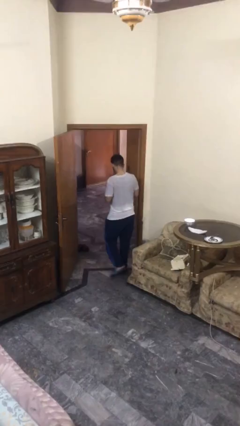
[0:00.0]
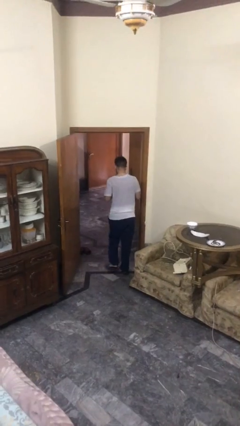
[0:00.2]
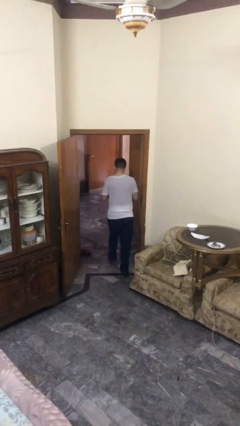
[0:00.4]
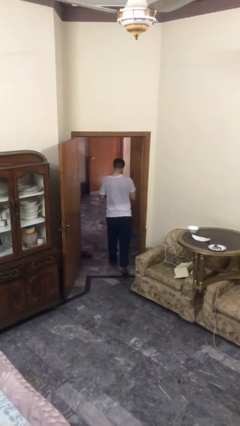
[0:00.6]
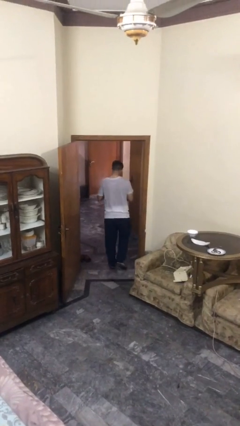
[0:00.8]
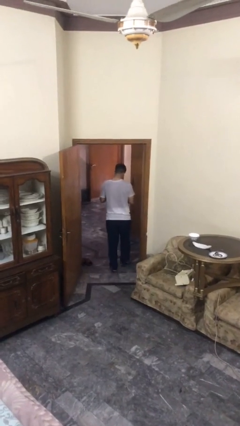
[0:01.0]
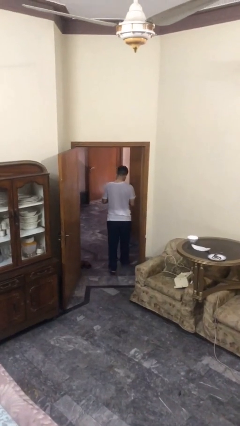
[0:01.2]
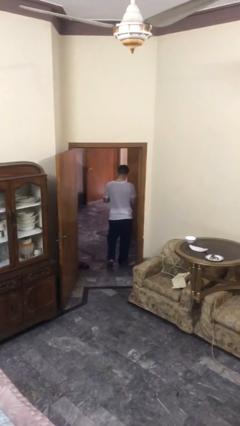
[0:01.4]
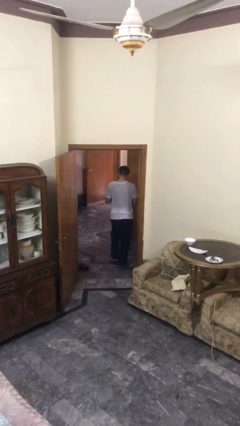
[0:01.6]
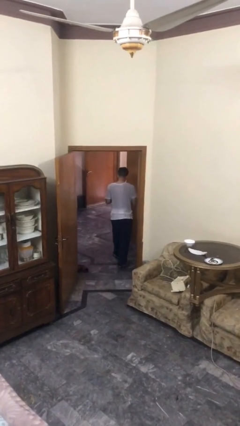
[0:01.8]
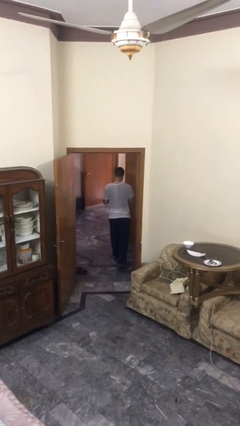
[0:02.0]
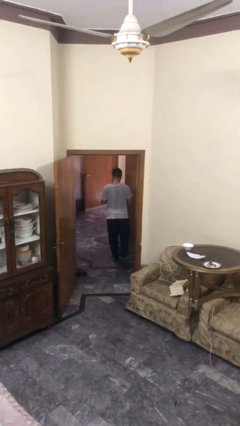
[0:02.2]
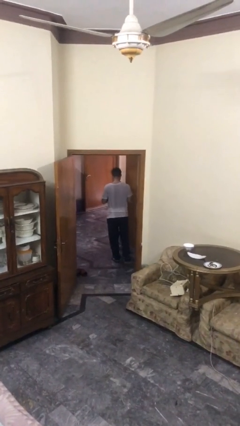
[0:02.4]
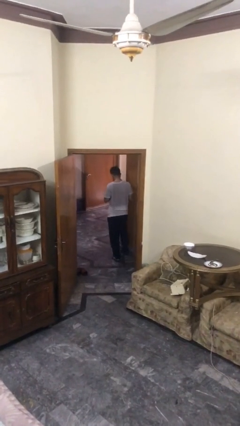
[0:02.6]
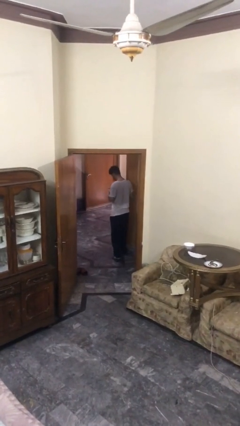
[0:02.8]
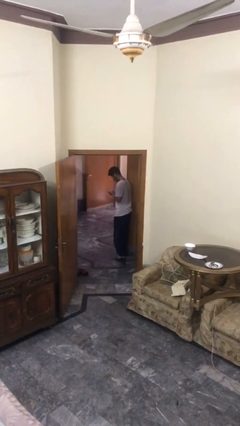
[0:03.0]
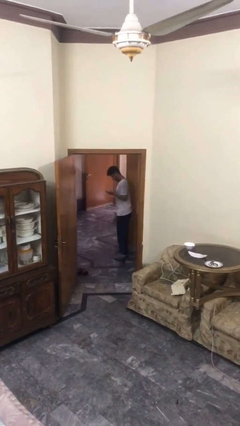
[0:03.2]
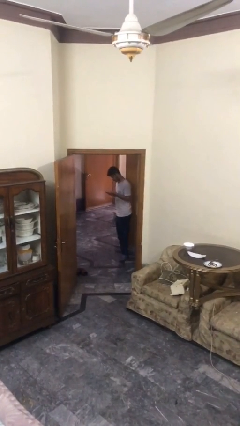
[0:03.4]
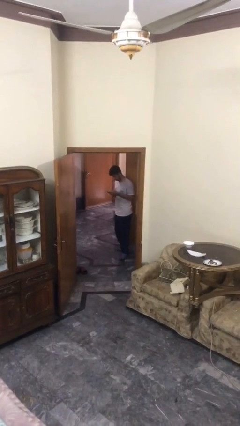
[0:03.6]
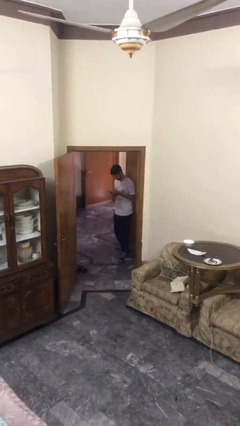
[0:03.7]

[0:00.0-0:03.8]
person exits scene through structure

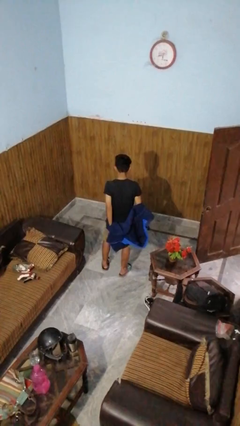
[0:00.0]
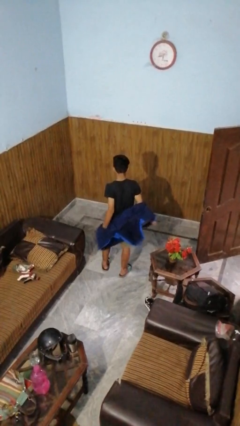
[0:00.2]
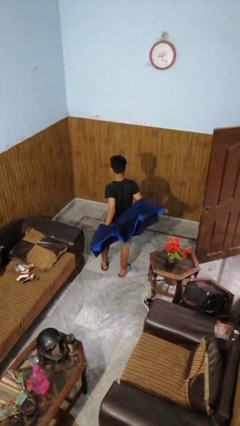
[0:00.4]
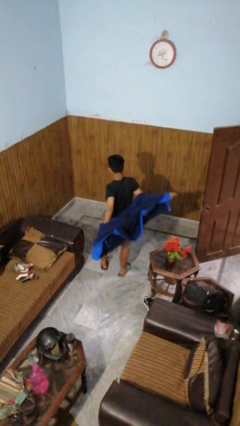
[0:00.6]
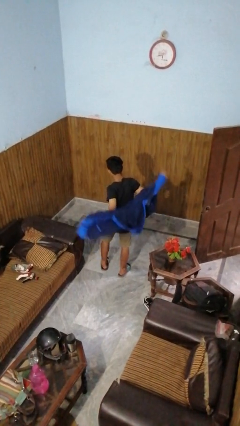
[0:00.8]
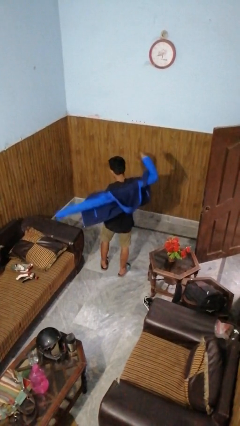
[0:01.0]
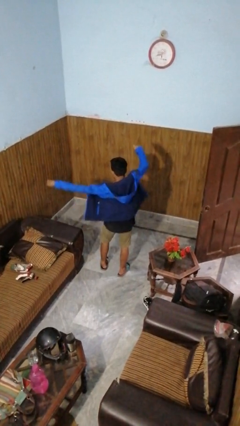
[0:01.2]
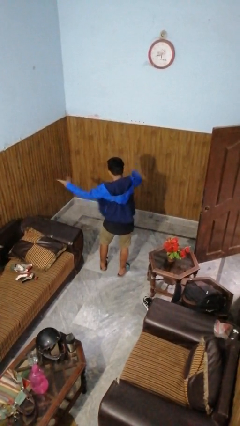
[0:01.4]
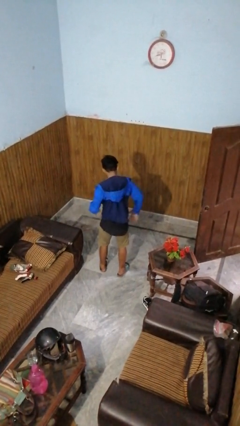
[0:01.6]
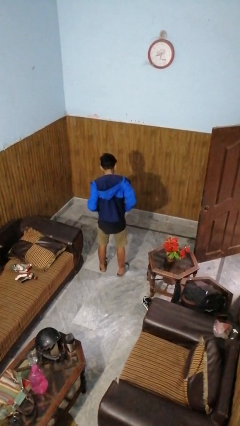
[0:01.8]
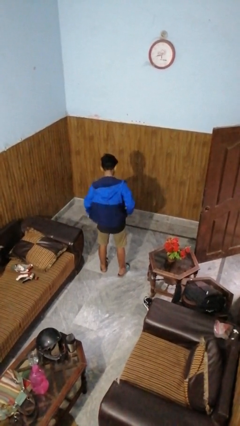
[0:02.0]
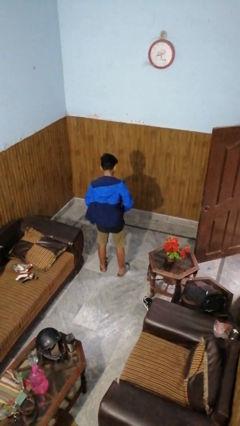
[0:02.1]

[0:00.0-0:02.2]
person puts on jacket

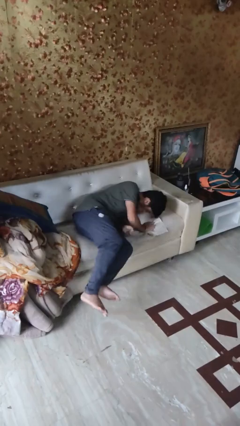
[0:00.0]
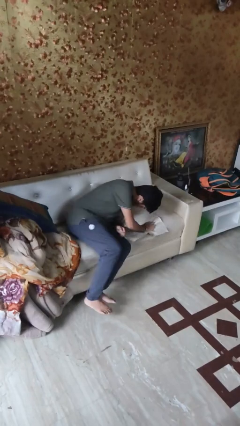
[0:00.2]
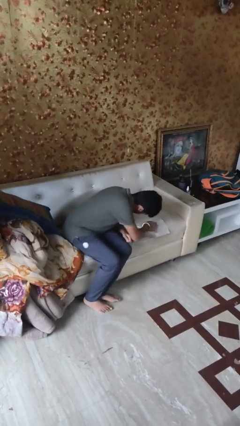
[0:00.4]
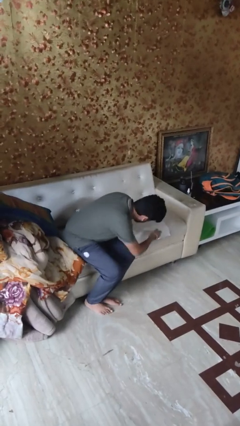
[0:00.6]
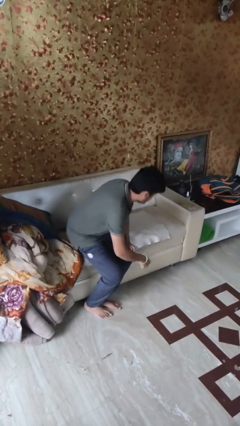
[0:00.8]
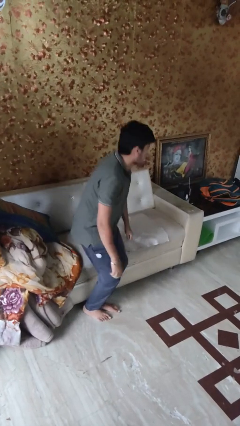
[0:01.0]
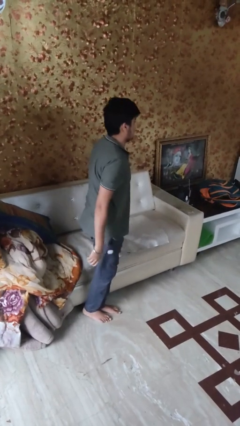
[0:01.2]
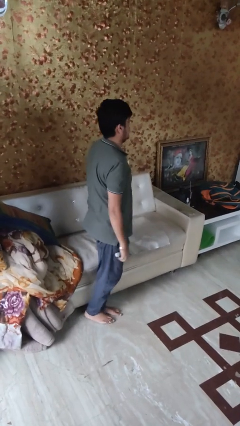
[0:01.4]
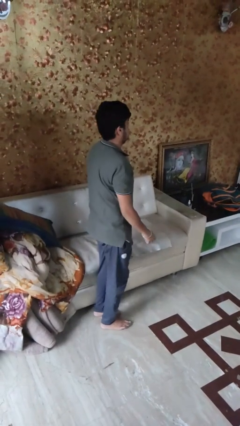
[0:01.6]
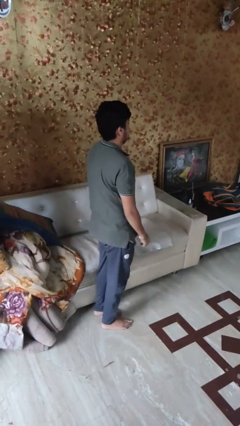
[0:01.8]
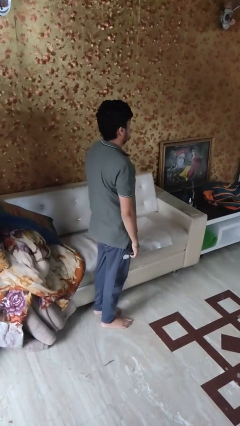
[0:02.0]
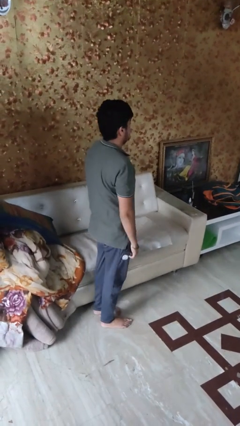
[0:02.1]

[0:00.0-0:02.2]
person stands up

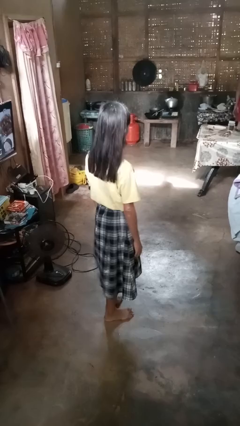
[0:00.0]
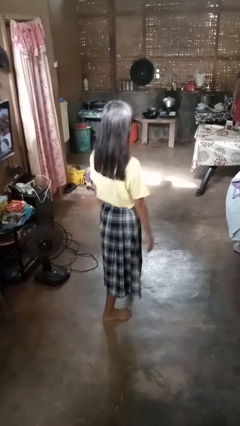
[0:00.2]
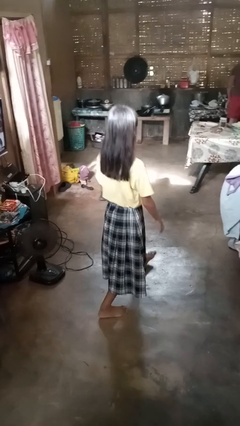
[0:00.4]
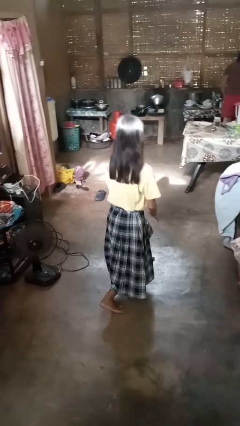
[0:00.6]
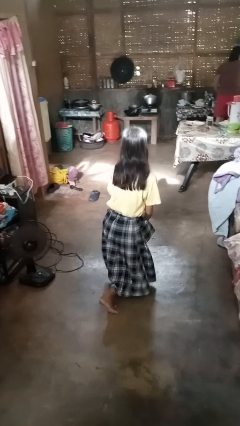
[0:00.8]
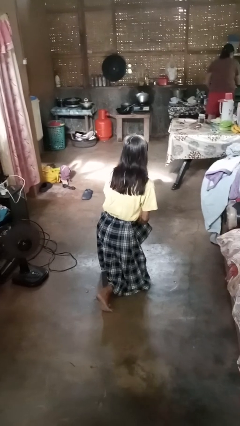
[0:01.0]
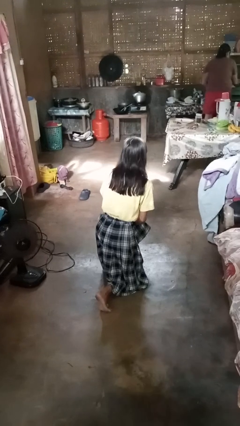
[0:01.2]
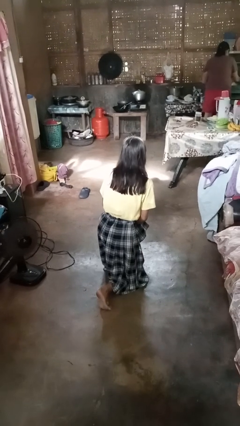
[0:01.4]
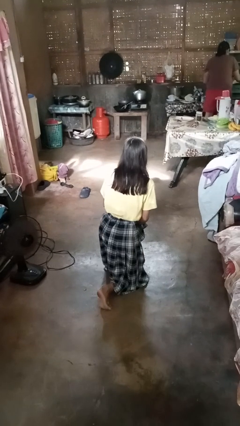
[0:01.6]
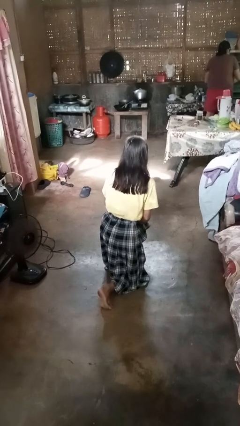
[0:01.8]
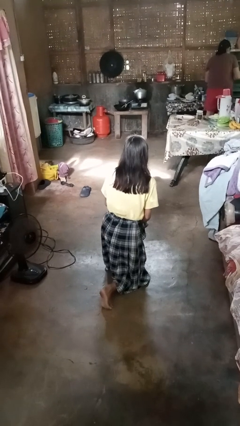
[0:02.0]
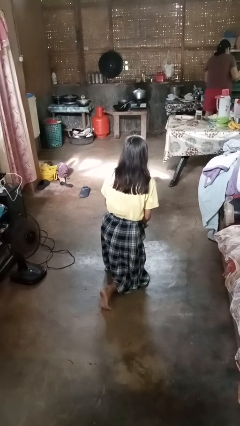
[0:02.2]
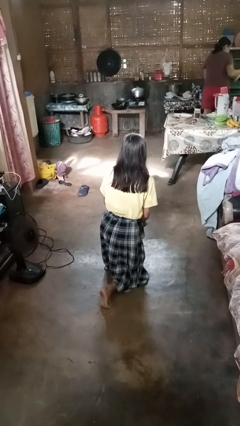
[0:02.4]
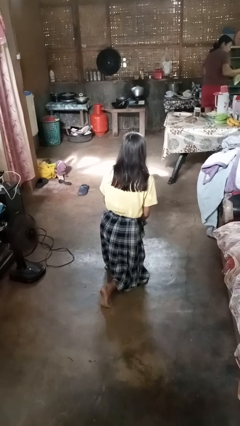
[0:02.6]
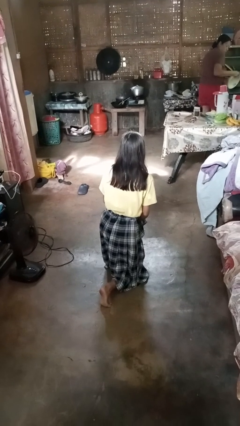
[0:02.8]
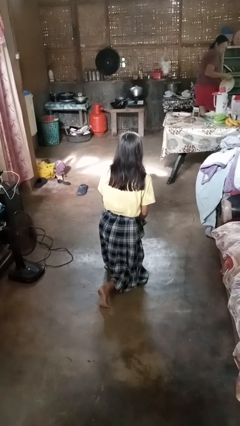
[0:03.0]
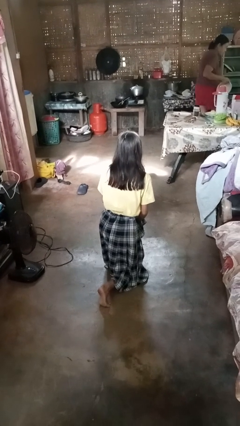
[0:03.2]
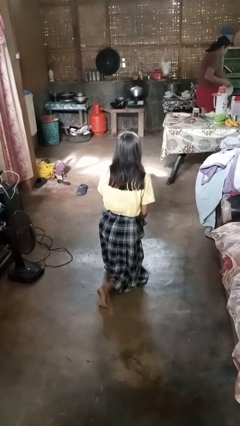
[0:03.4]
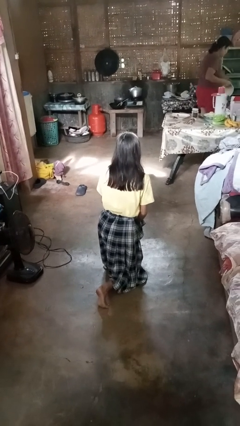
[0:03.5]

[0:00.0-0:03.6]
person exercises with lunges

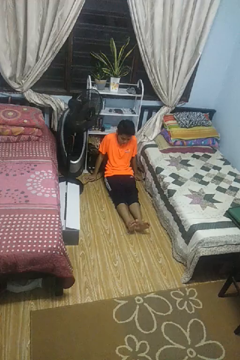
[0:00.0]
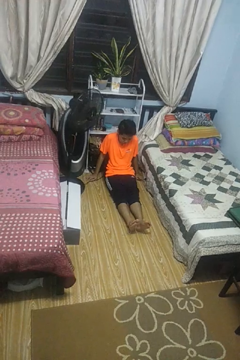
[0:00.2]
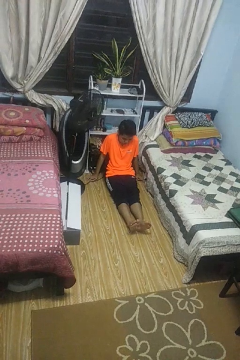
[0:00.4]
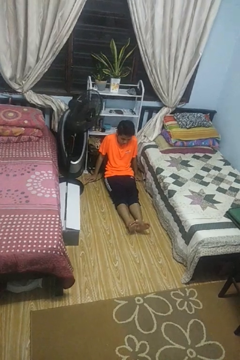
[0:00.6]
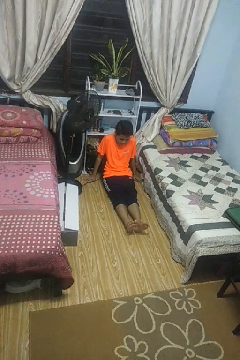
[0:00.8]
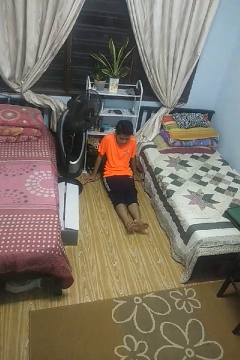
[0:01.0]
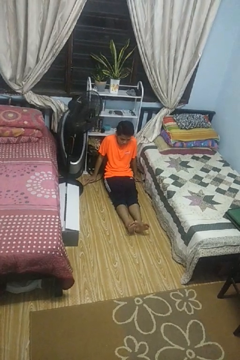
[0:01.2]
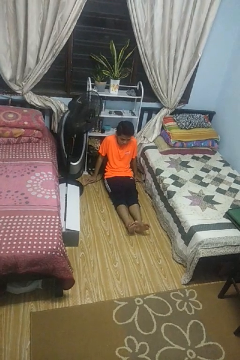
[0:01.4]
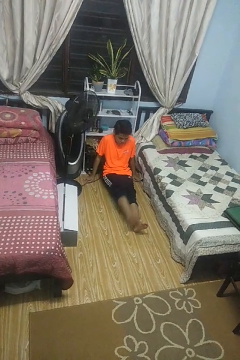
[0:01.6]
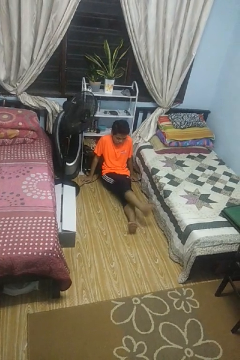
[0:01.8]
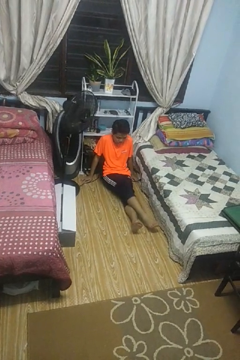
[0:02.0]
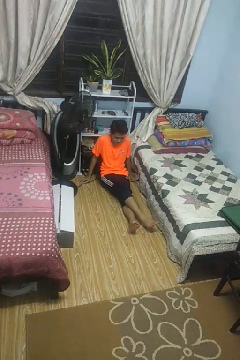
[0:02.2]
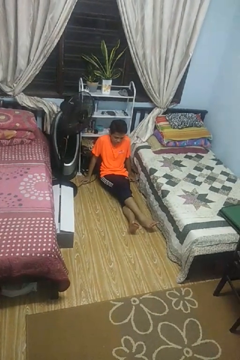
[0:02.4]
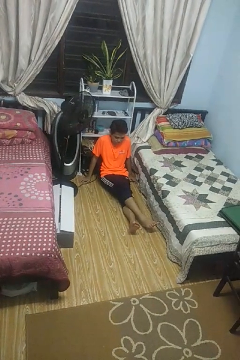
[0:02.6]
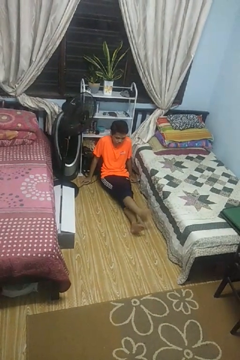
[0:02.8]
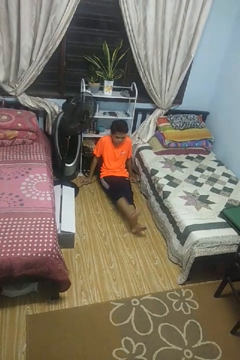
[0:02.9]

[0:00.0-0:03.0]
person crosses legs

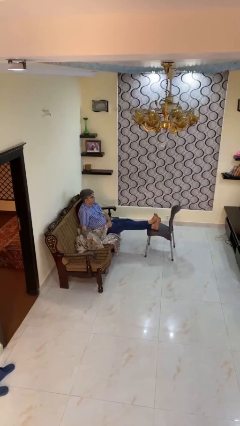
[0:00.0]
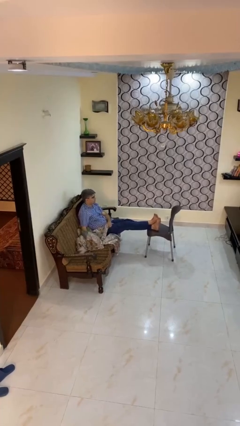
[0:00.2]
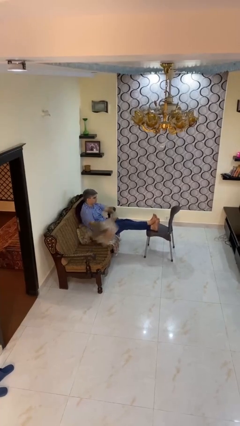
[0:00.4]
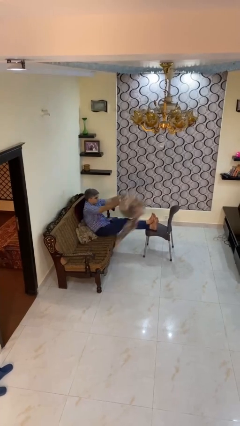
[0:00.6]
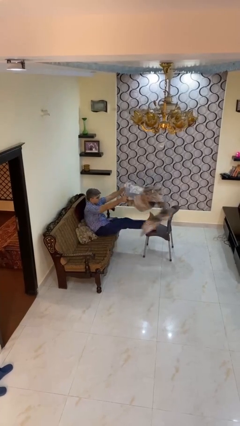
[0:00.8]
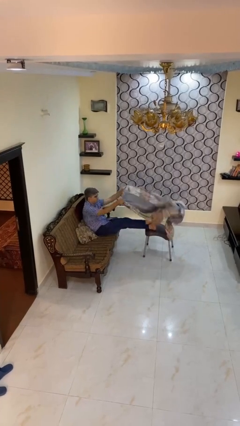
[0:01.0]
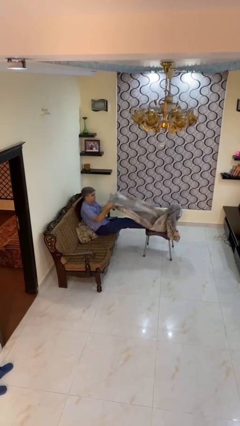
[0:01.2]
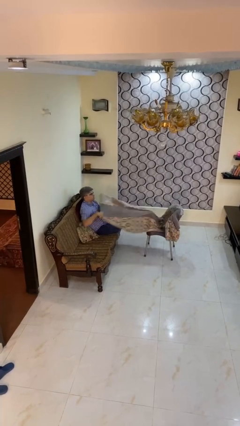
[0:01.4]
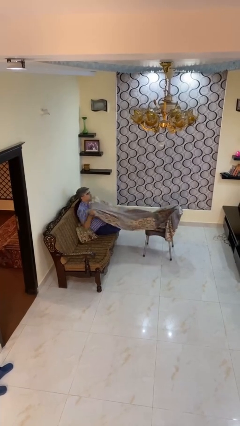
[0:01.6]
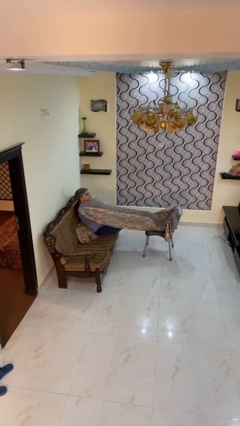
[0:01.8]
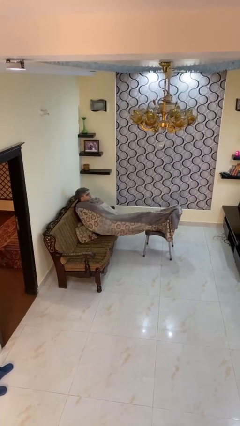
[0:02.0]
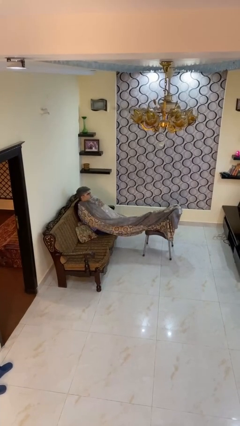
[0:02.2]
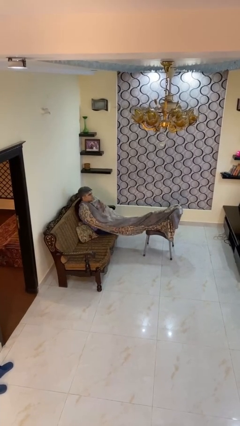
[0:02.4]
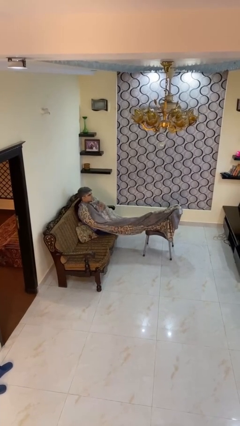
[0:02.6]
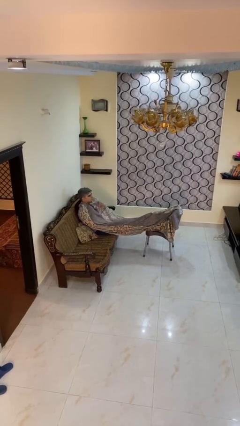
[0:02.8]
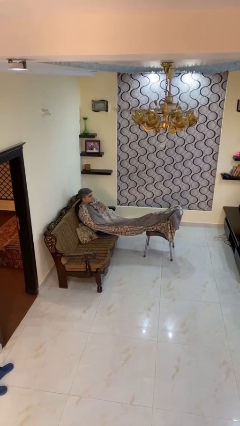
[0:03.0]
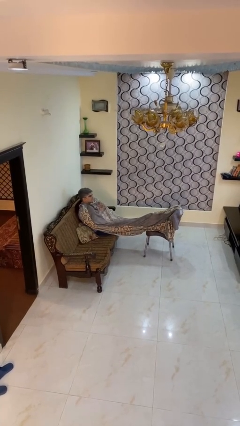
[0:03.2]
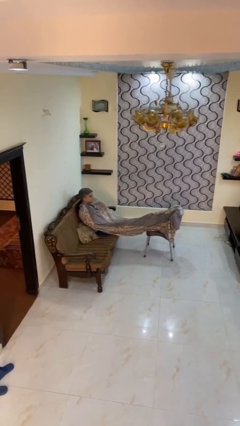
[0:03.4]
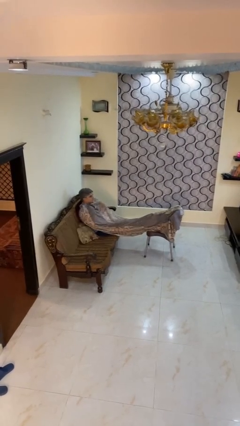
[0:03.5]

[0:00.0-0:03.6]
person covers with blanket
